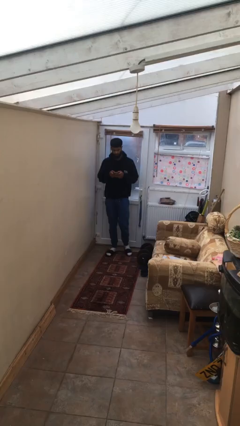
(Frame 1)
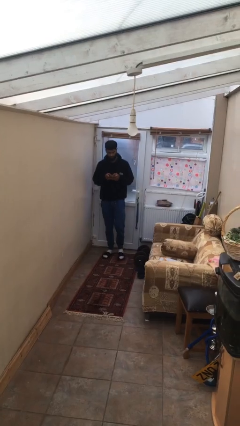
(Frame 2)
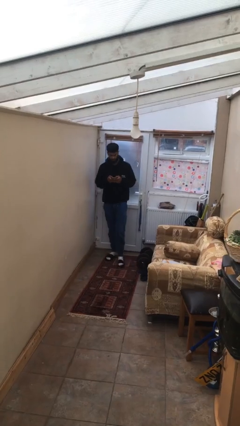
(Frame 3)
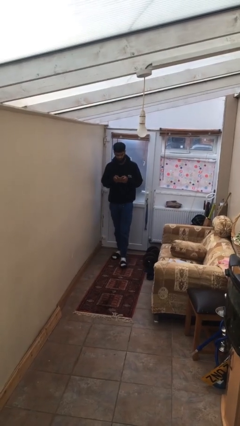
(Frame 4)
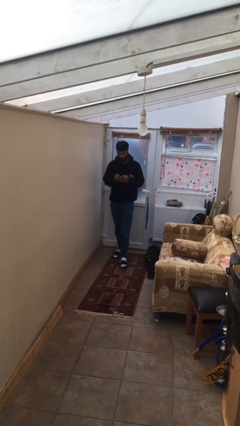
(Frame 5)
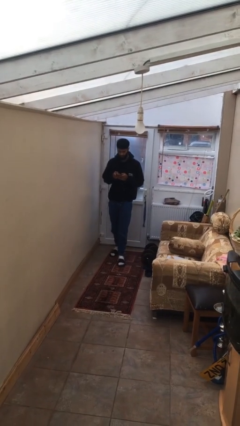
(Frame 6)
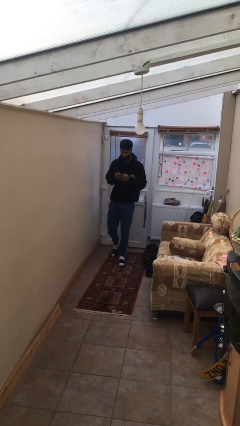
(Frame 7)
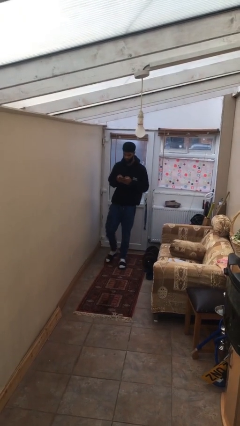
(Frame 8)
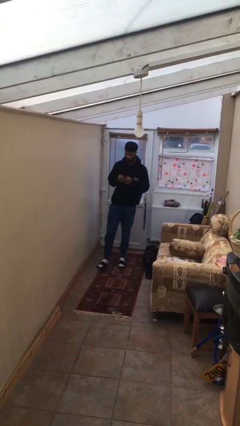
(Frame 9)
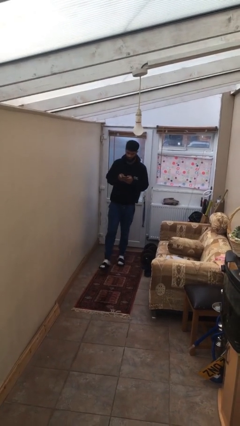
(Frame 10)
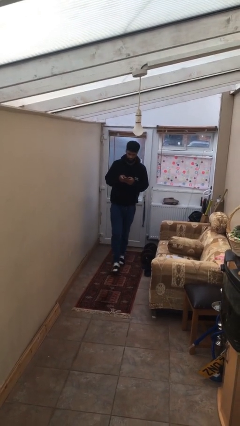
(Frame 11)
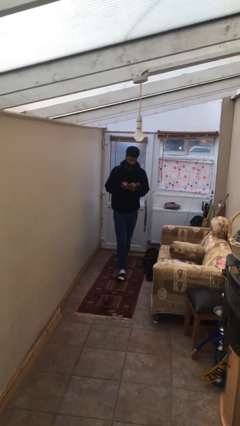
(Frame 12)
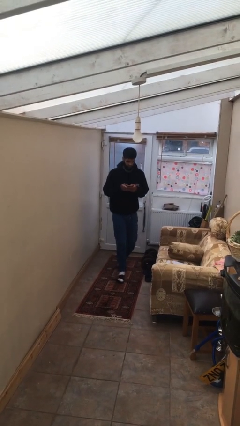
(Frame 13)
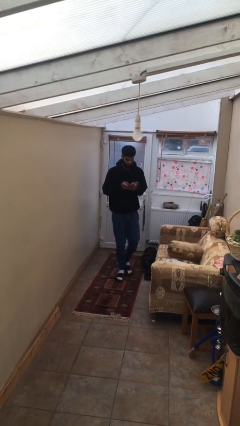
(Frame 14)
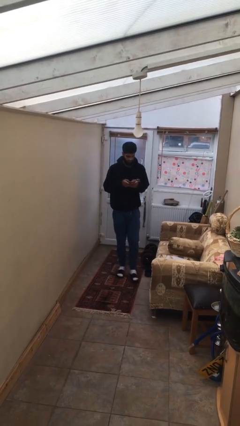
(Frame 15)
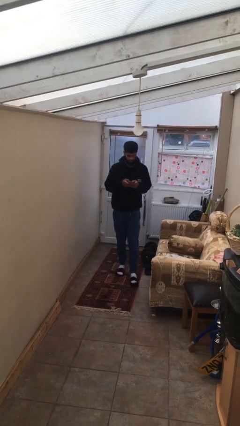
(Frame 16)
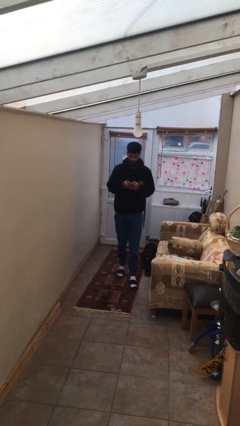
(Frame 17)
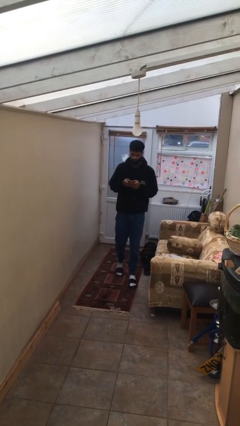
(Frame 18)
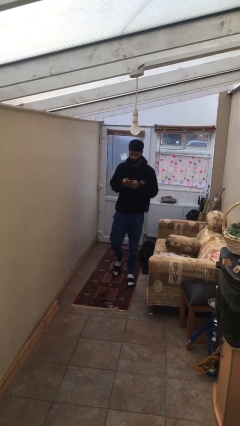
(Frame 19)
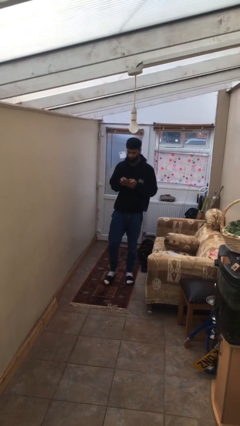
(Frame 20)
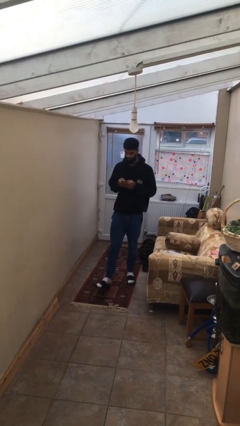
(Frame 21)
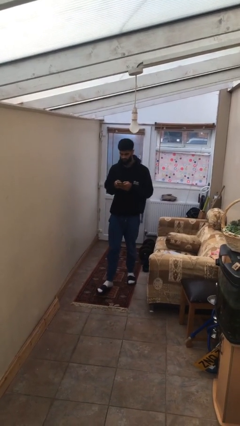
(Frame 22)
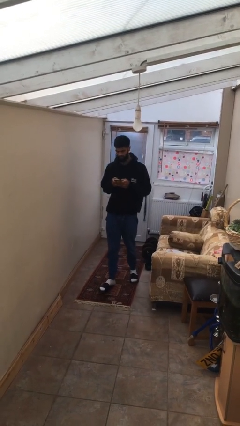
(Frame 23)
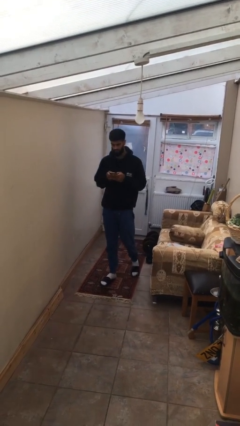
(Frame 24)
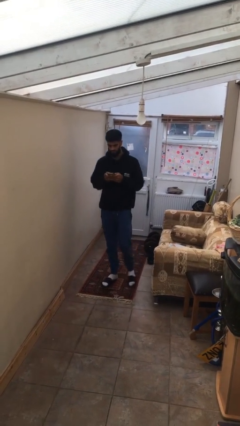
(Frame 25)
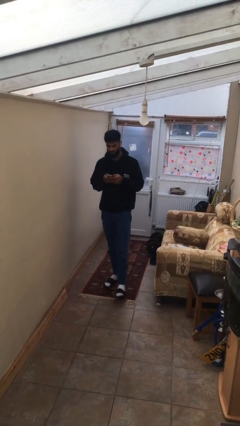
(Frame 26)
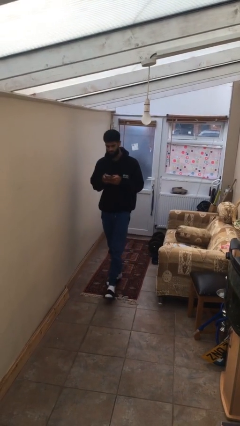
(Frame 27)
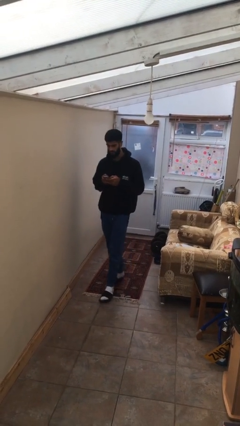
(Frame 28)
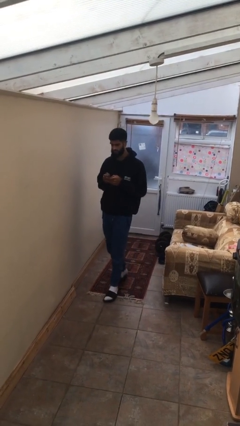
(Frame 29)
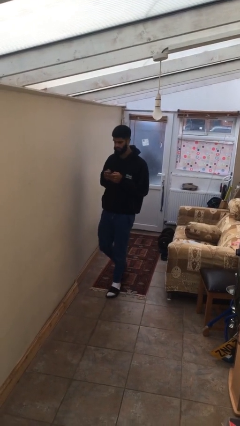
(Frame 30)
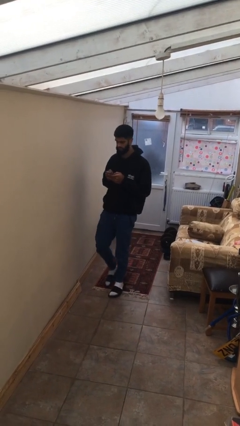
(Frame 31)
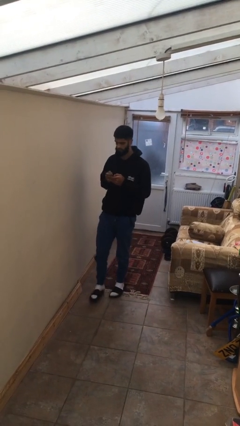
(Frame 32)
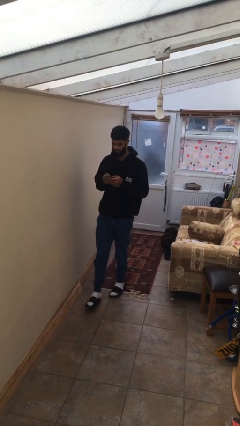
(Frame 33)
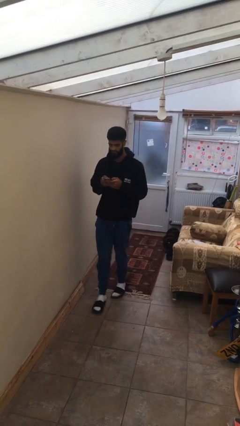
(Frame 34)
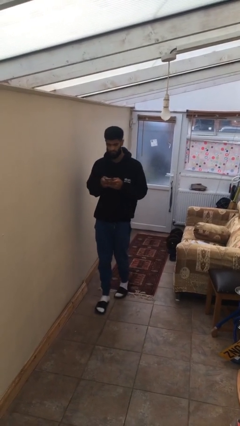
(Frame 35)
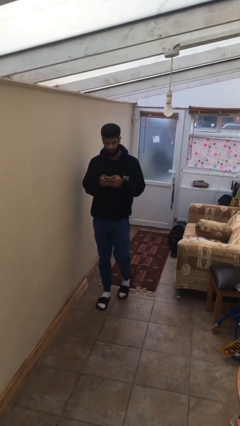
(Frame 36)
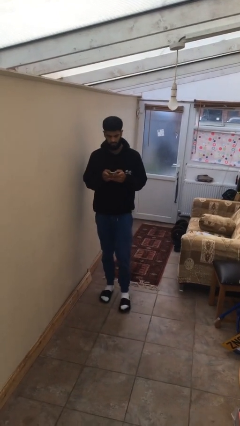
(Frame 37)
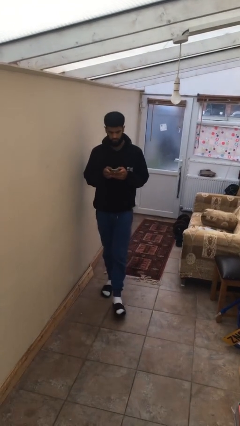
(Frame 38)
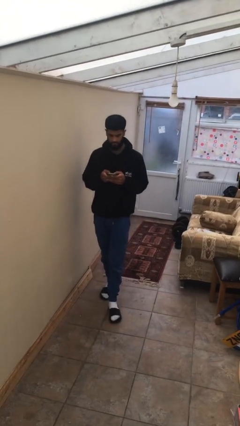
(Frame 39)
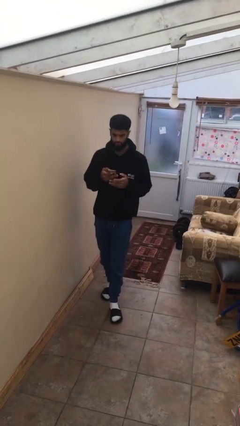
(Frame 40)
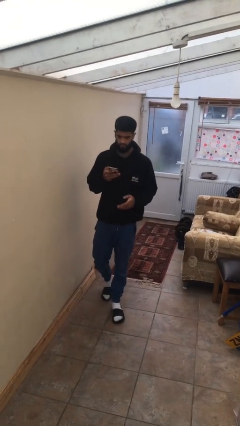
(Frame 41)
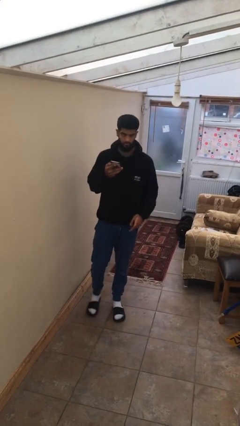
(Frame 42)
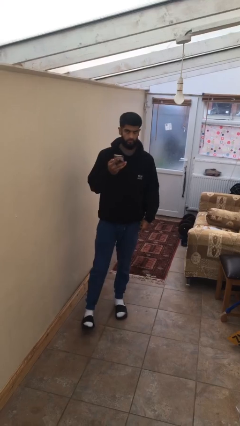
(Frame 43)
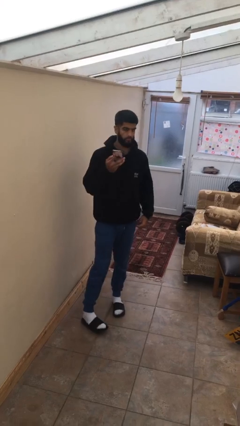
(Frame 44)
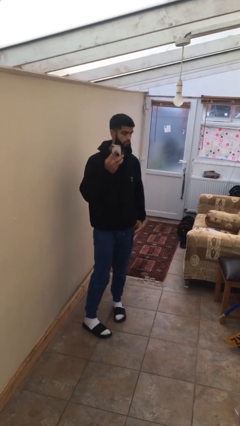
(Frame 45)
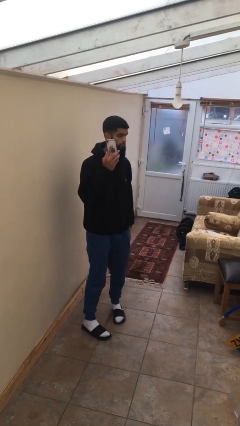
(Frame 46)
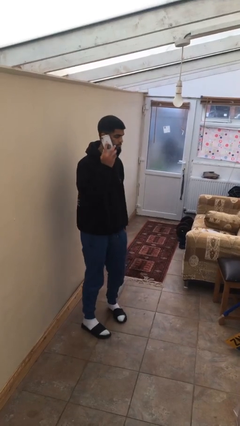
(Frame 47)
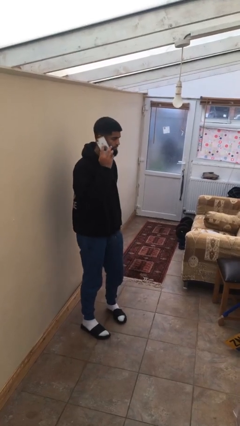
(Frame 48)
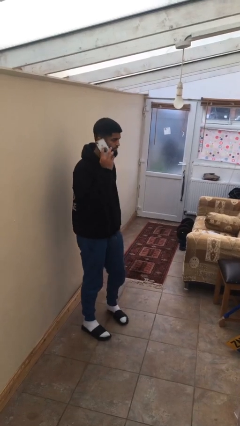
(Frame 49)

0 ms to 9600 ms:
person texts on phone

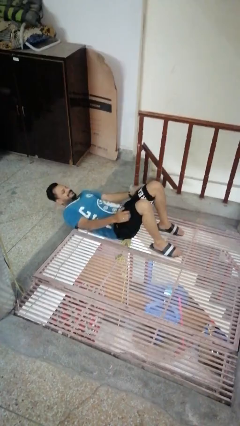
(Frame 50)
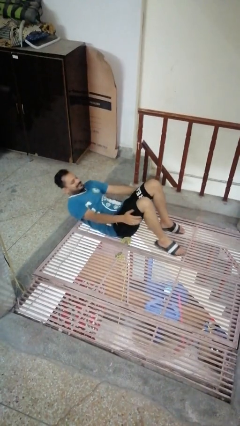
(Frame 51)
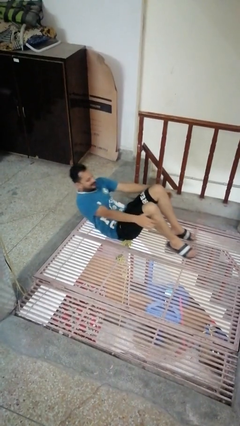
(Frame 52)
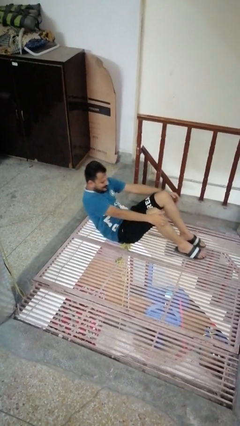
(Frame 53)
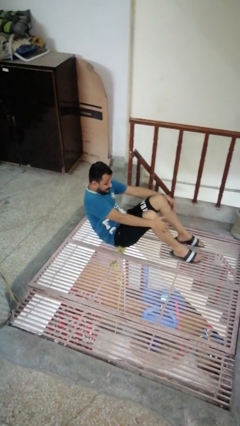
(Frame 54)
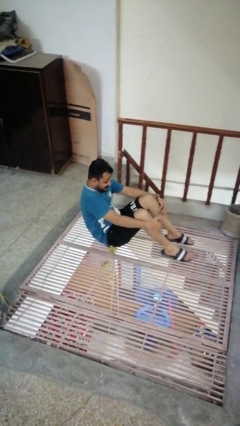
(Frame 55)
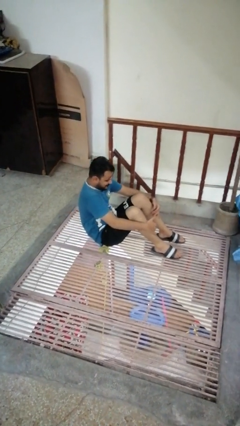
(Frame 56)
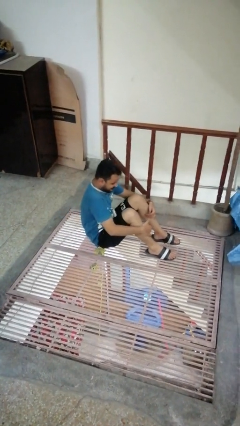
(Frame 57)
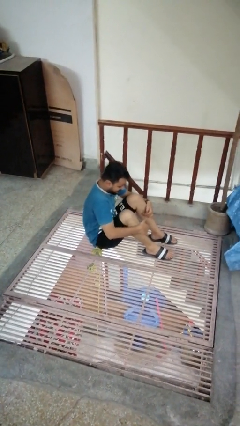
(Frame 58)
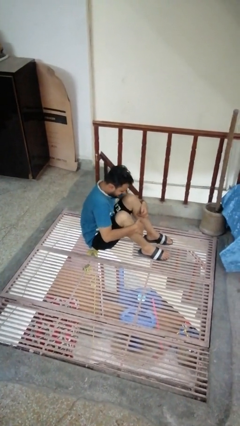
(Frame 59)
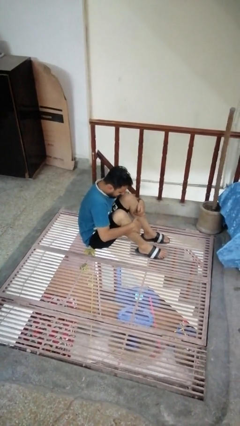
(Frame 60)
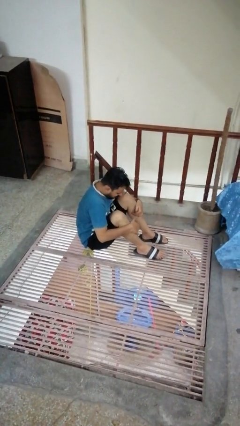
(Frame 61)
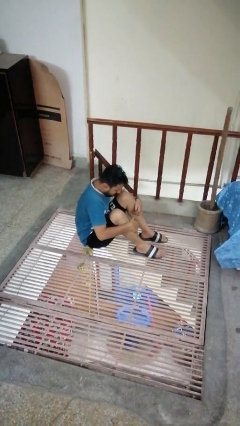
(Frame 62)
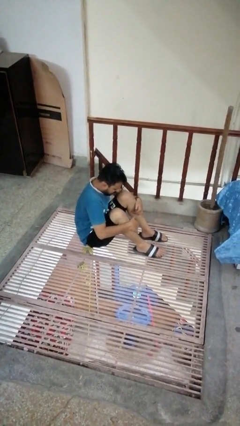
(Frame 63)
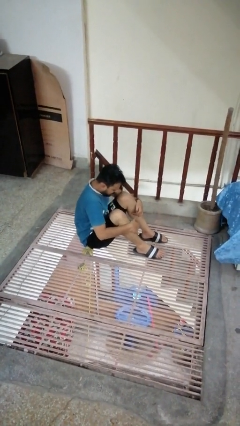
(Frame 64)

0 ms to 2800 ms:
person exercises with situp

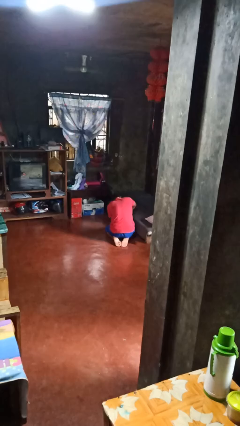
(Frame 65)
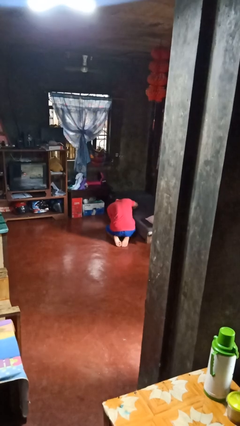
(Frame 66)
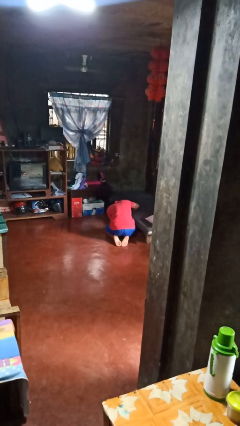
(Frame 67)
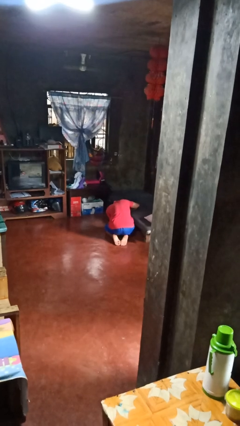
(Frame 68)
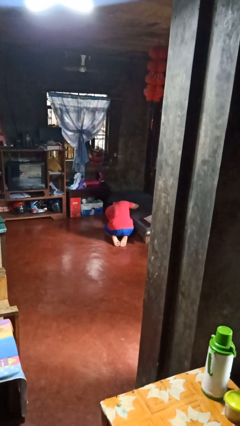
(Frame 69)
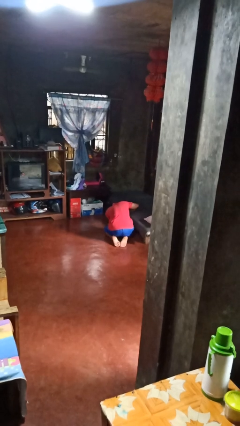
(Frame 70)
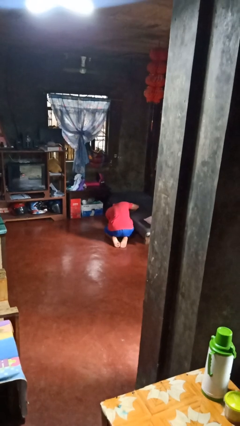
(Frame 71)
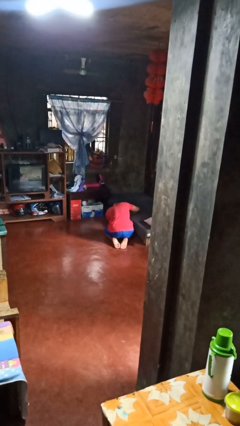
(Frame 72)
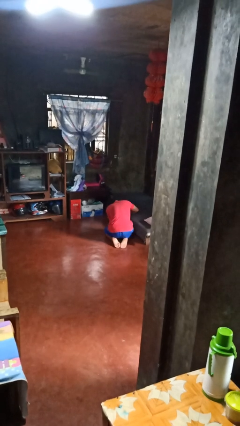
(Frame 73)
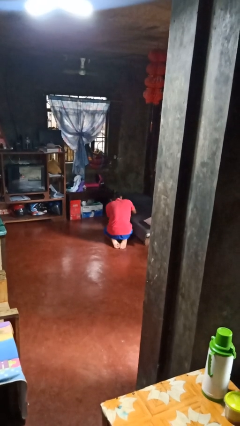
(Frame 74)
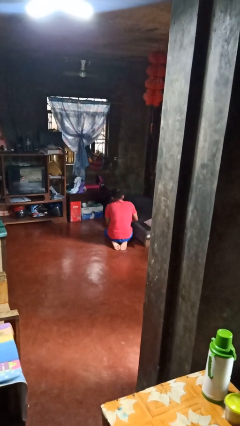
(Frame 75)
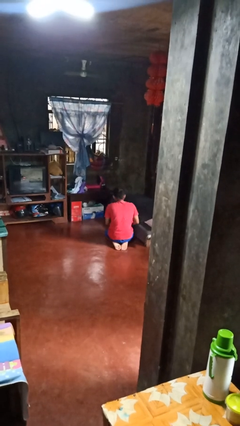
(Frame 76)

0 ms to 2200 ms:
person searches under bed

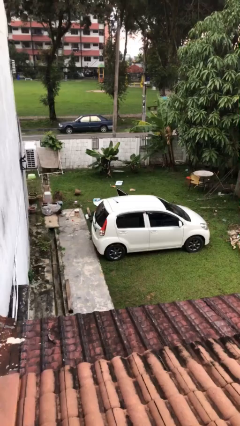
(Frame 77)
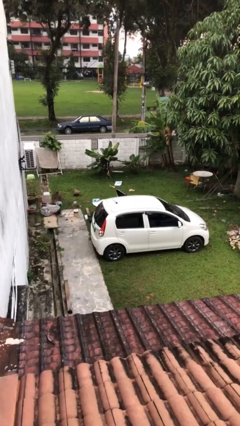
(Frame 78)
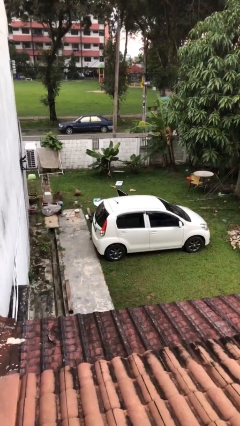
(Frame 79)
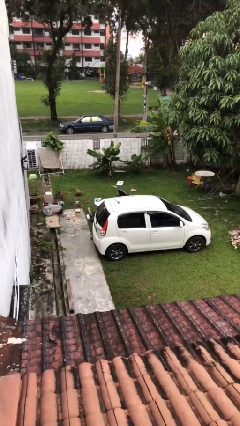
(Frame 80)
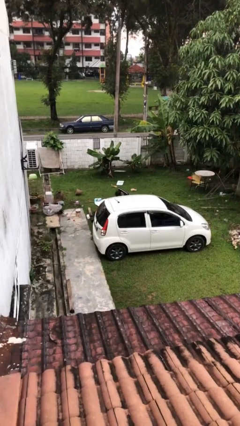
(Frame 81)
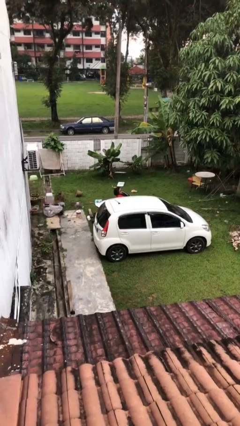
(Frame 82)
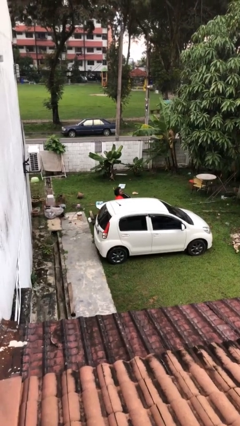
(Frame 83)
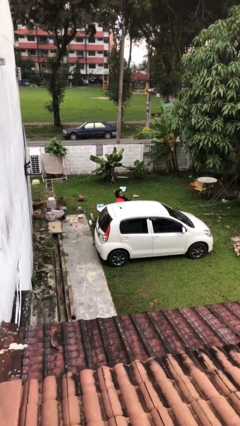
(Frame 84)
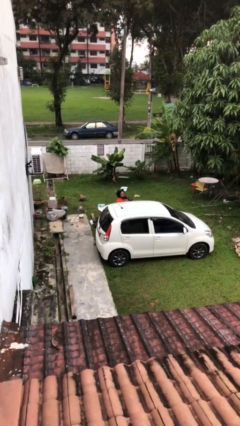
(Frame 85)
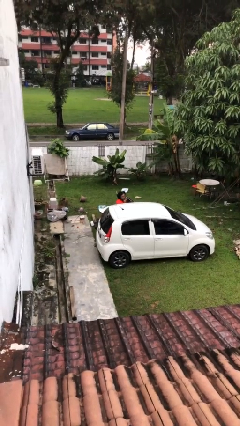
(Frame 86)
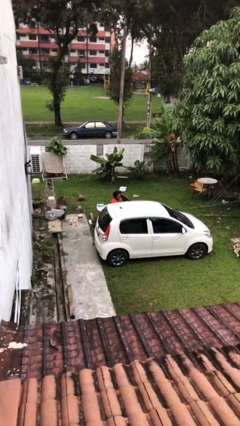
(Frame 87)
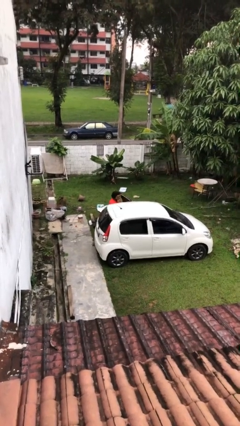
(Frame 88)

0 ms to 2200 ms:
person exits car

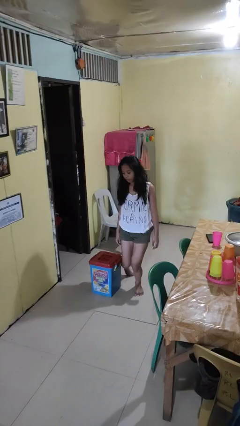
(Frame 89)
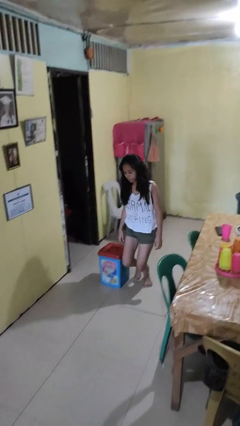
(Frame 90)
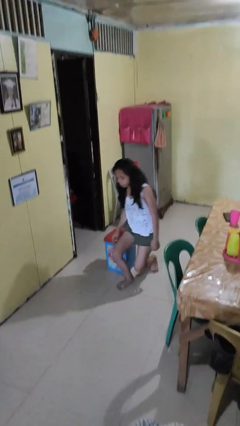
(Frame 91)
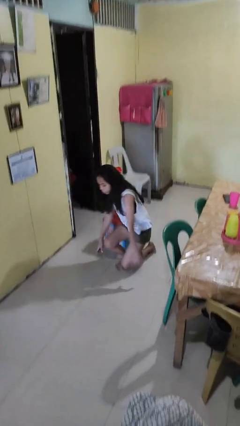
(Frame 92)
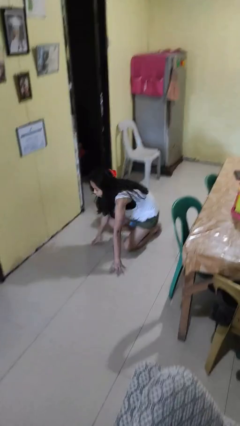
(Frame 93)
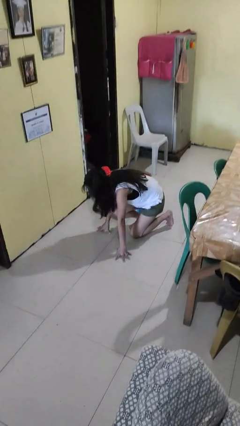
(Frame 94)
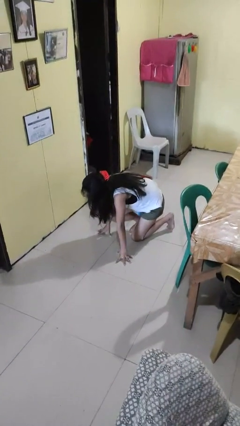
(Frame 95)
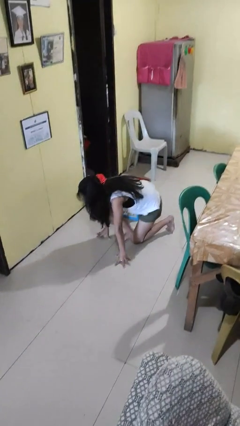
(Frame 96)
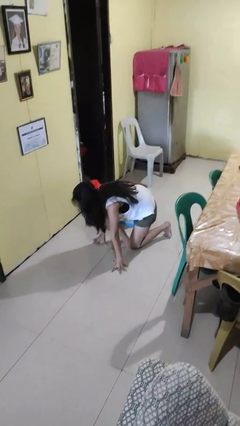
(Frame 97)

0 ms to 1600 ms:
person lies down on floor
